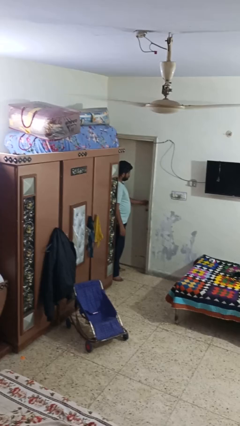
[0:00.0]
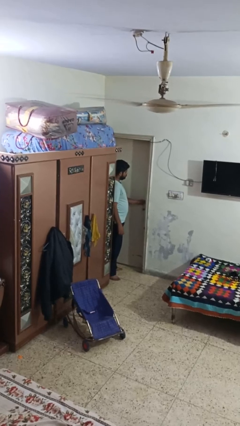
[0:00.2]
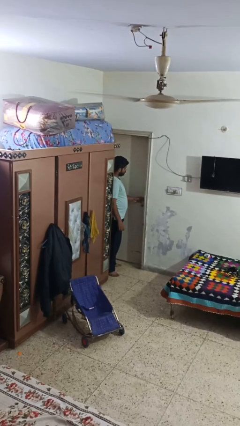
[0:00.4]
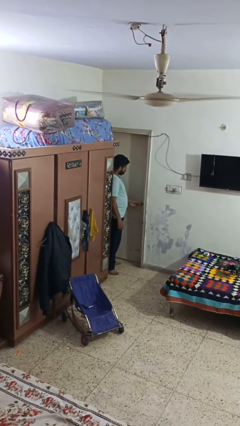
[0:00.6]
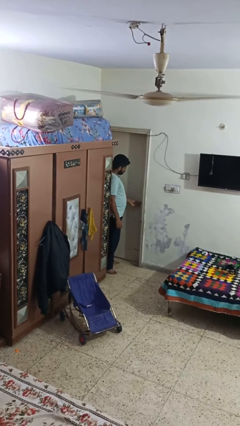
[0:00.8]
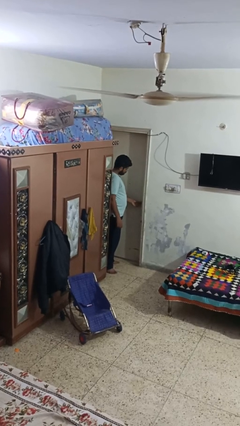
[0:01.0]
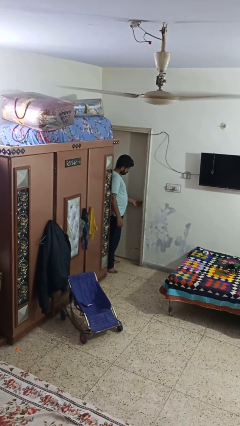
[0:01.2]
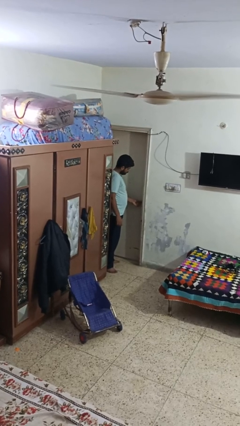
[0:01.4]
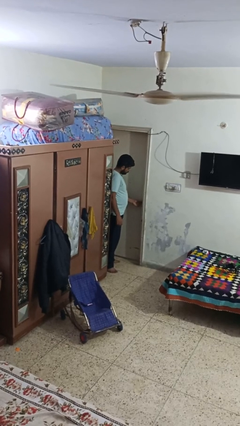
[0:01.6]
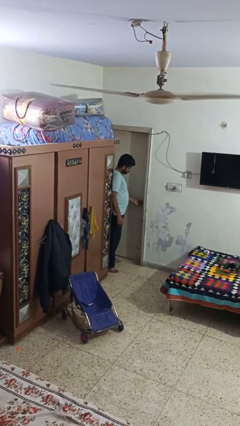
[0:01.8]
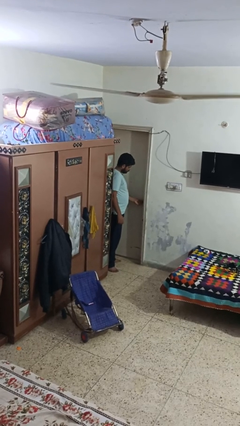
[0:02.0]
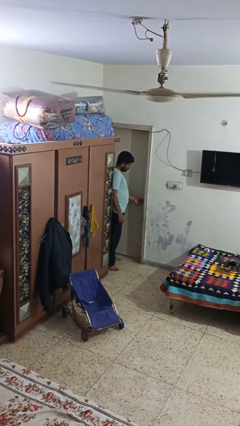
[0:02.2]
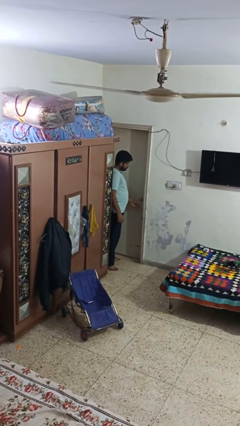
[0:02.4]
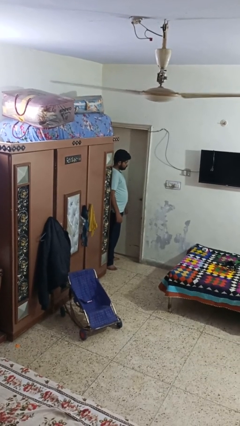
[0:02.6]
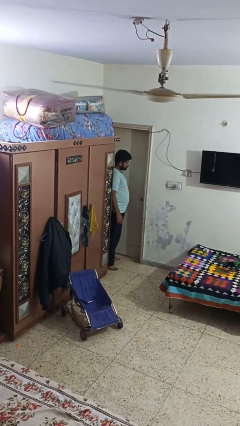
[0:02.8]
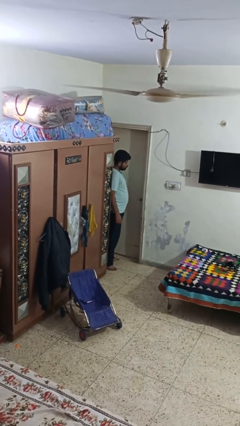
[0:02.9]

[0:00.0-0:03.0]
person locks door with keys

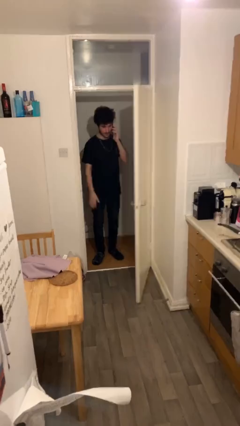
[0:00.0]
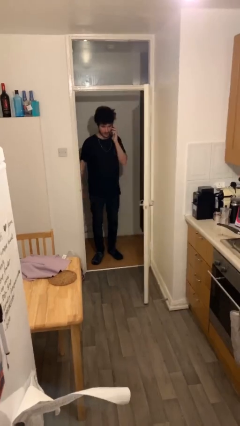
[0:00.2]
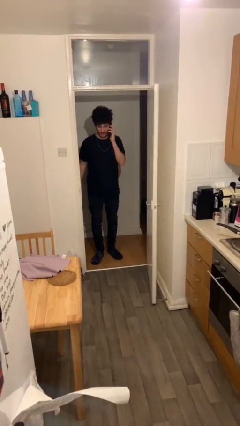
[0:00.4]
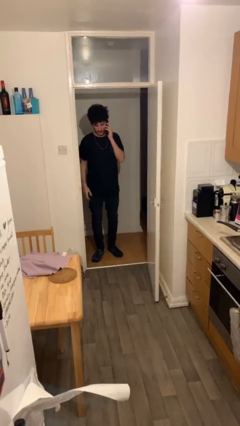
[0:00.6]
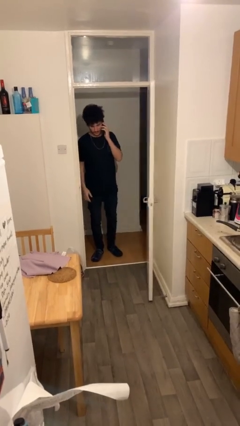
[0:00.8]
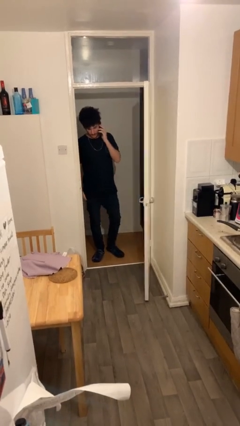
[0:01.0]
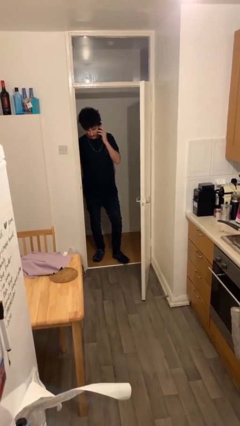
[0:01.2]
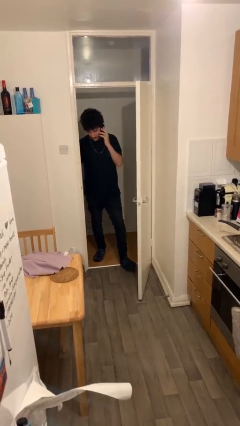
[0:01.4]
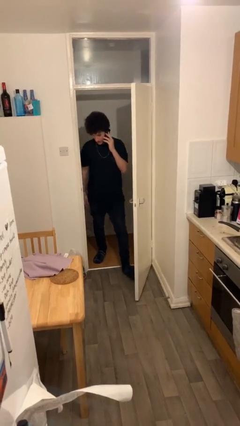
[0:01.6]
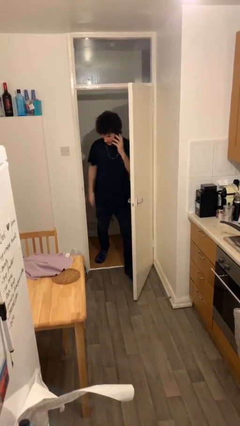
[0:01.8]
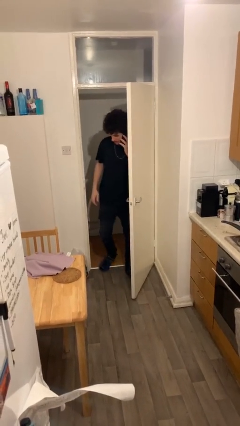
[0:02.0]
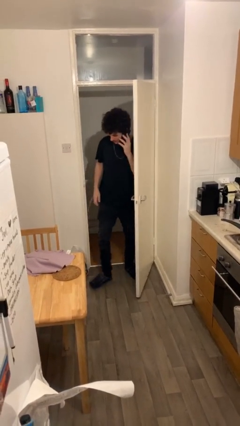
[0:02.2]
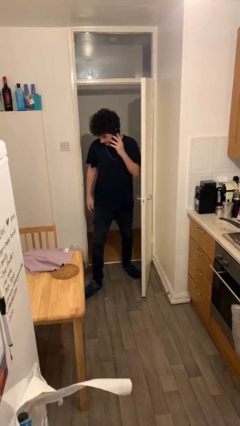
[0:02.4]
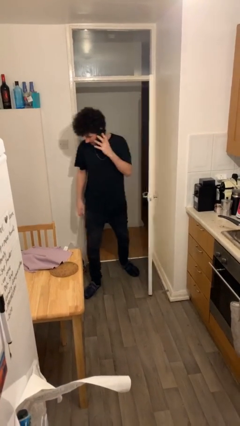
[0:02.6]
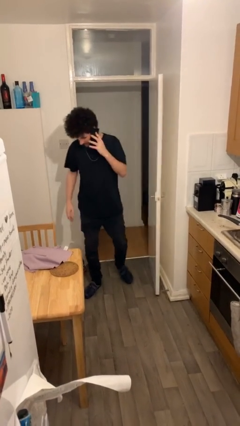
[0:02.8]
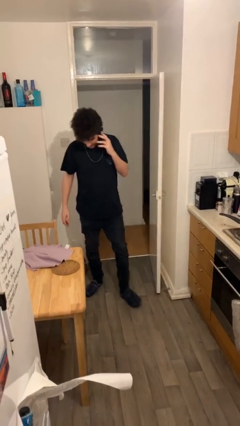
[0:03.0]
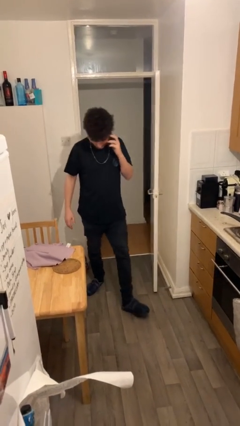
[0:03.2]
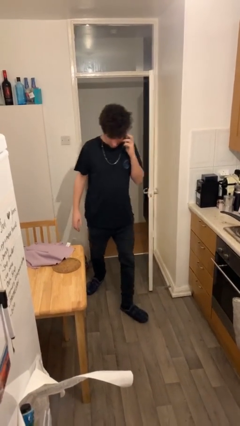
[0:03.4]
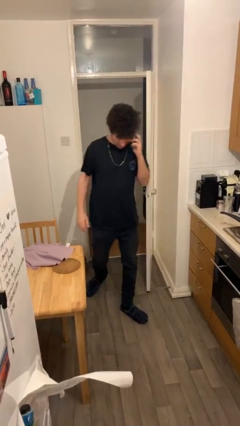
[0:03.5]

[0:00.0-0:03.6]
person enters scene through structure

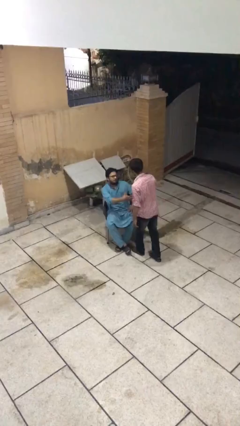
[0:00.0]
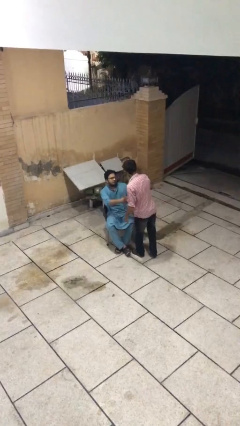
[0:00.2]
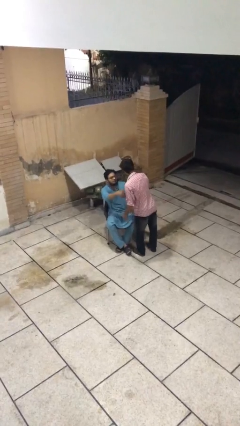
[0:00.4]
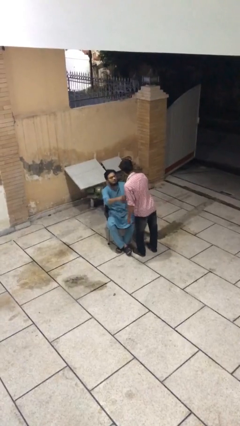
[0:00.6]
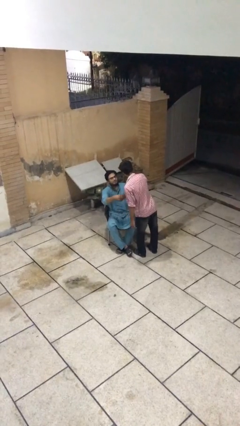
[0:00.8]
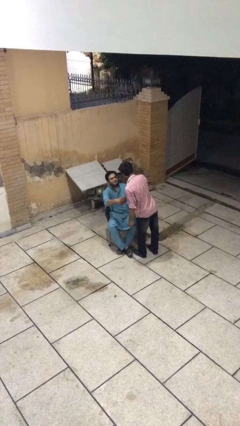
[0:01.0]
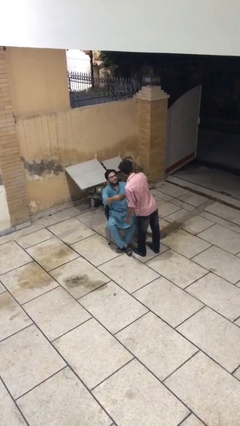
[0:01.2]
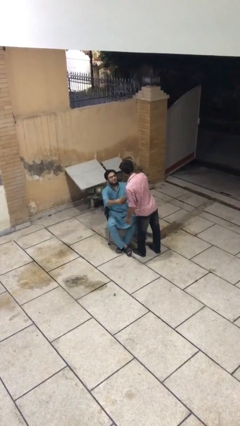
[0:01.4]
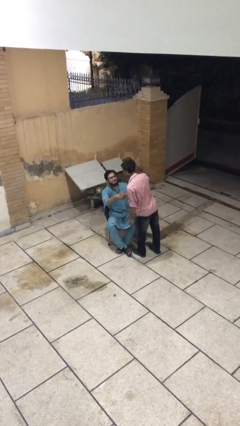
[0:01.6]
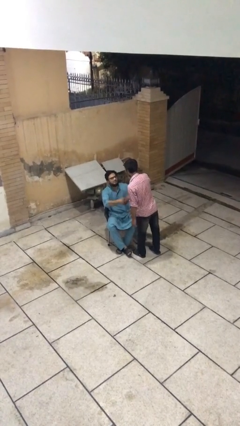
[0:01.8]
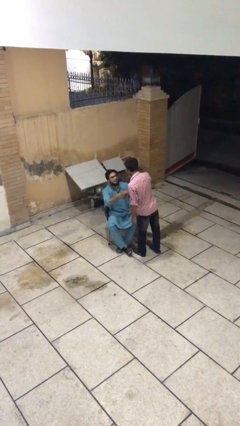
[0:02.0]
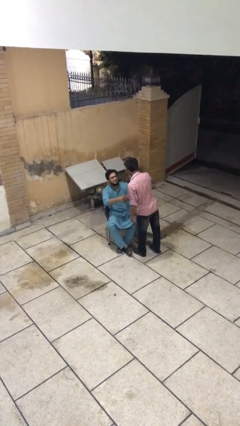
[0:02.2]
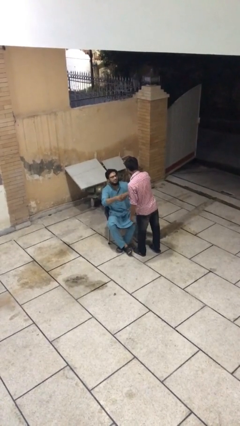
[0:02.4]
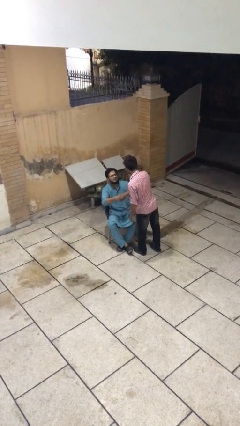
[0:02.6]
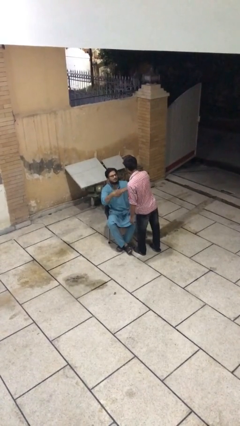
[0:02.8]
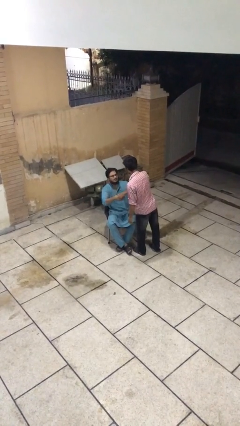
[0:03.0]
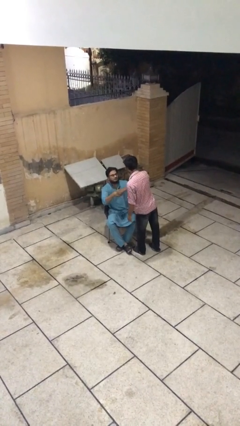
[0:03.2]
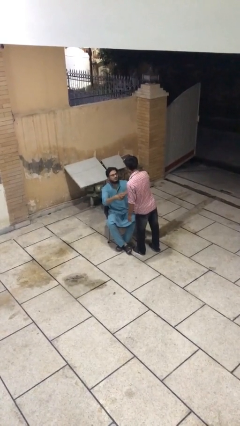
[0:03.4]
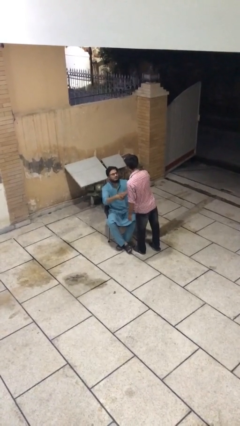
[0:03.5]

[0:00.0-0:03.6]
person shakes hand

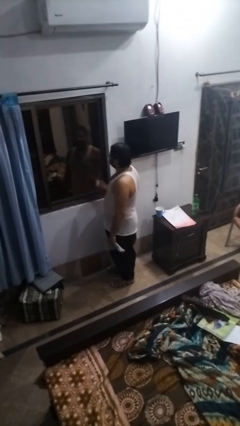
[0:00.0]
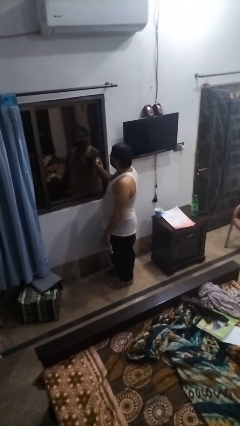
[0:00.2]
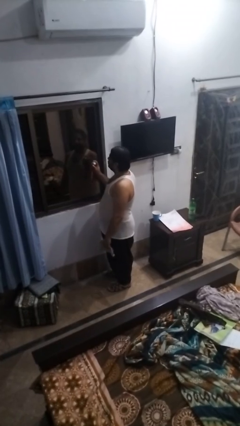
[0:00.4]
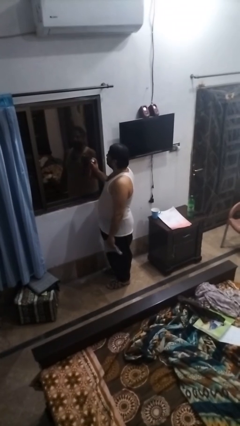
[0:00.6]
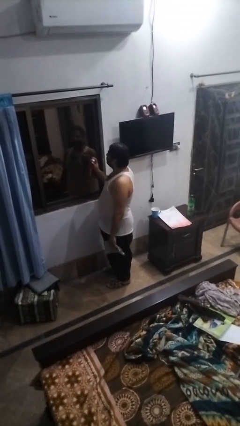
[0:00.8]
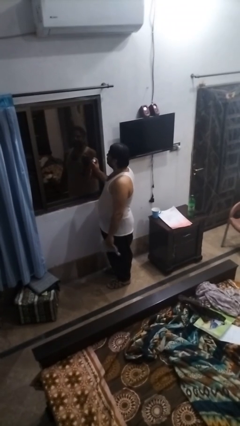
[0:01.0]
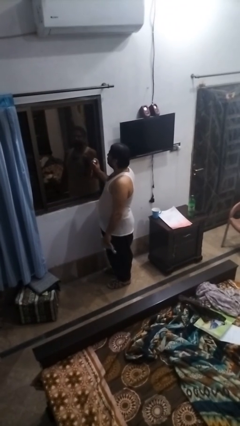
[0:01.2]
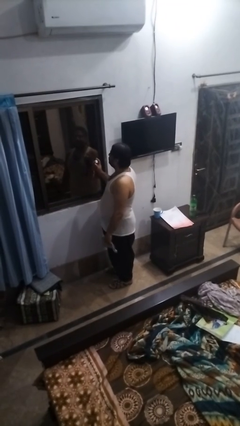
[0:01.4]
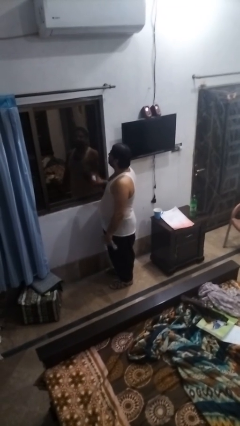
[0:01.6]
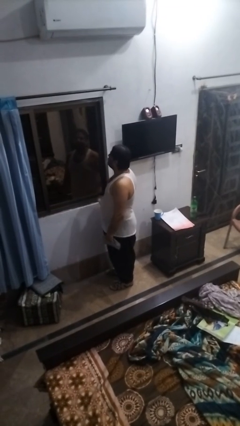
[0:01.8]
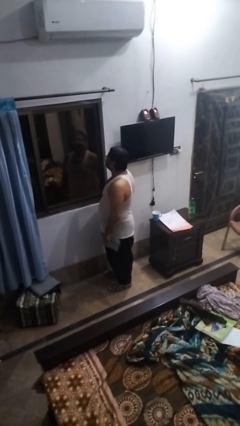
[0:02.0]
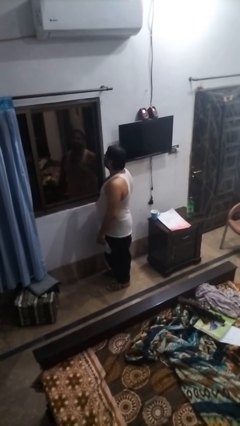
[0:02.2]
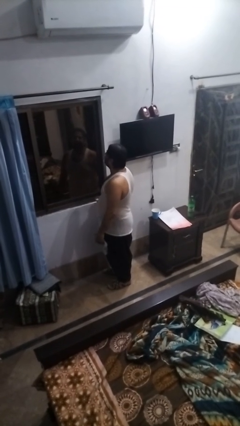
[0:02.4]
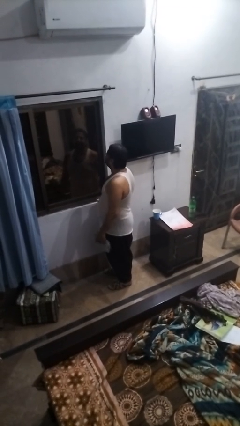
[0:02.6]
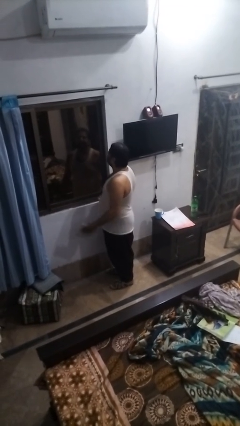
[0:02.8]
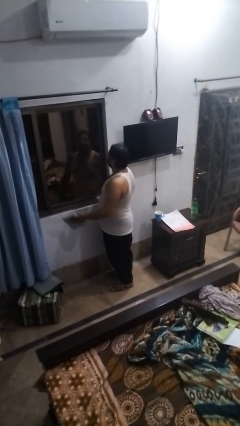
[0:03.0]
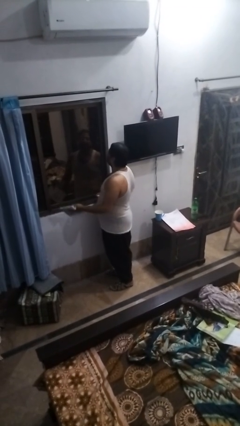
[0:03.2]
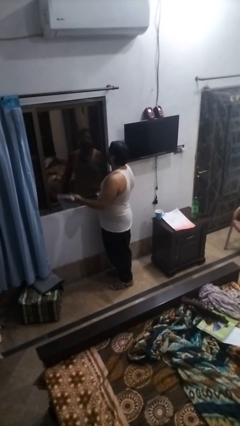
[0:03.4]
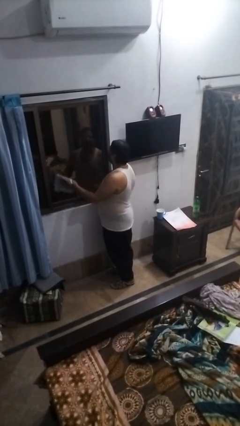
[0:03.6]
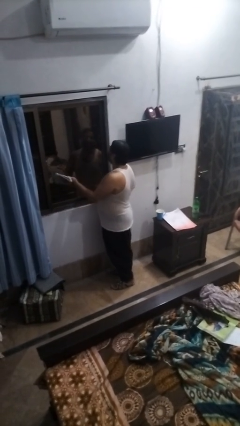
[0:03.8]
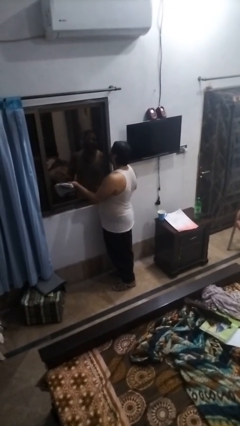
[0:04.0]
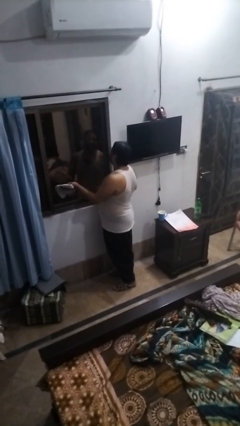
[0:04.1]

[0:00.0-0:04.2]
person sprays from bottle

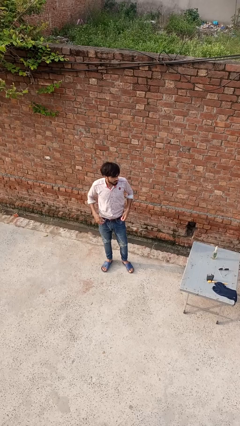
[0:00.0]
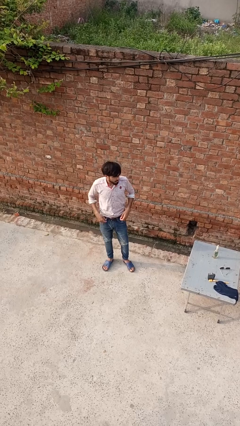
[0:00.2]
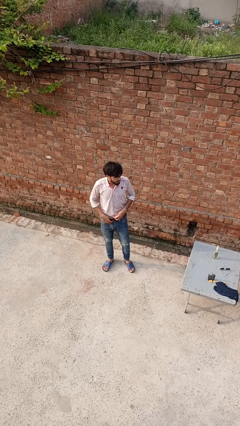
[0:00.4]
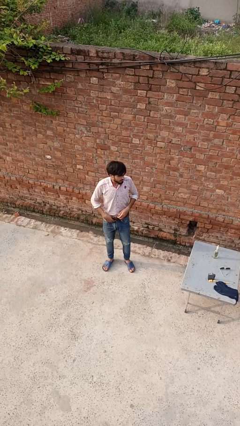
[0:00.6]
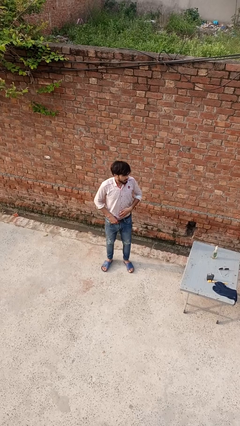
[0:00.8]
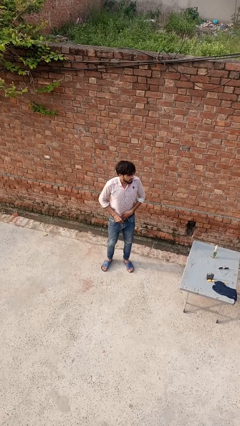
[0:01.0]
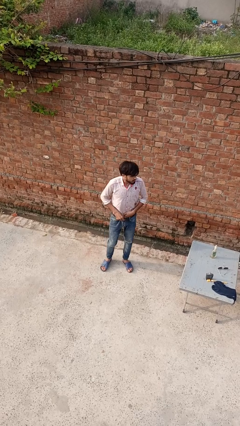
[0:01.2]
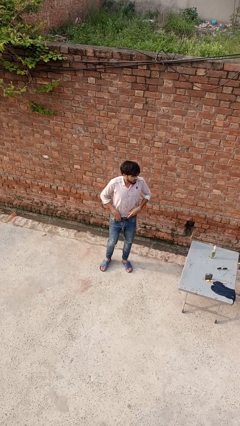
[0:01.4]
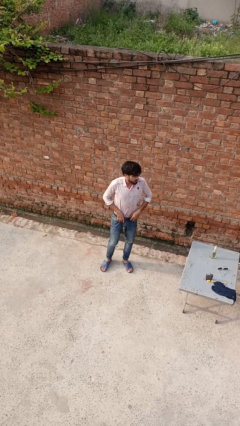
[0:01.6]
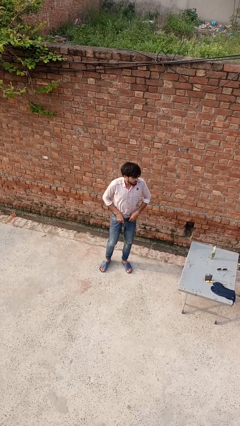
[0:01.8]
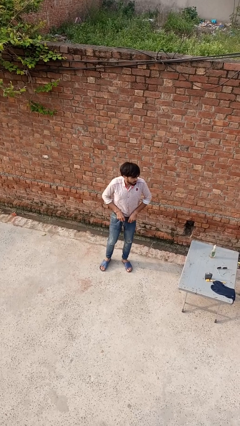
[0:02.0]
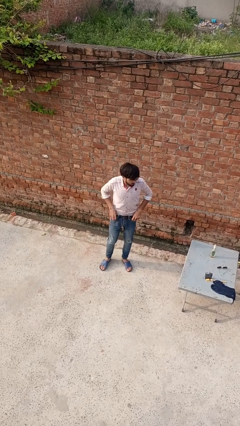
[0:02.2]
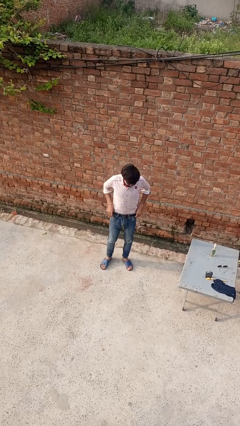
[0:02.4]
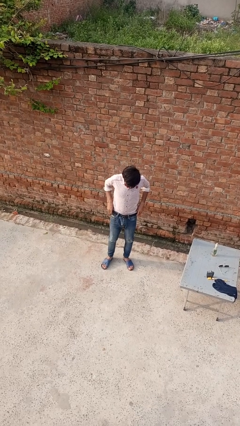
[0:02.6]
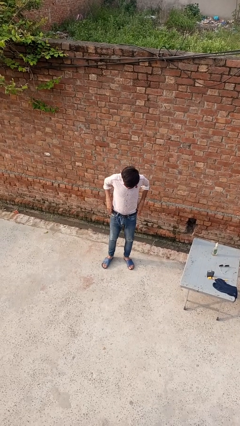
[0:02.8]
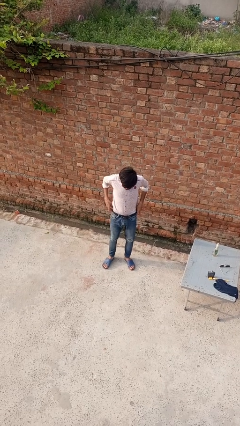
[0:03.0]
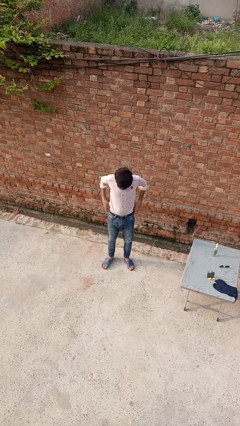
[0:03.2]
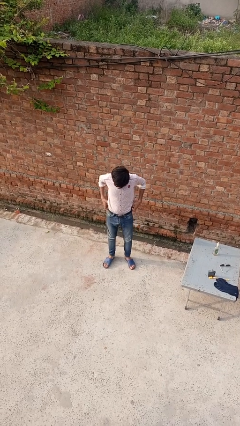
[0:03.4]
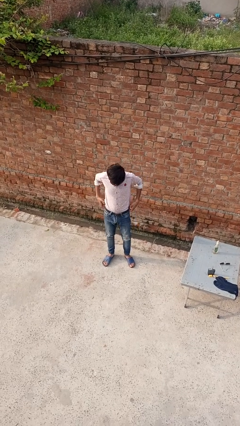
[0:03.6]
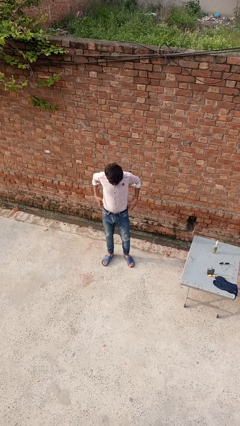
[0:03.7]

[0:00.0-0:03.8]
person hikes up pants
